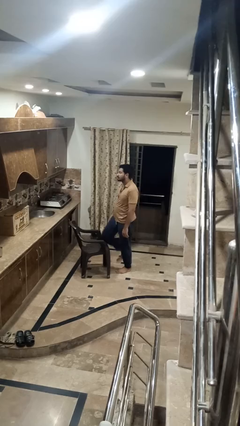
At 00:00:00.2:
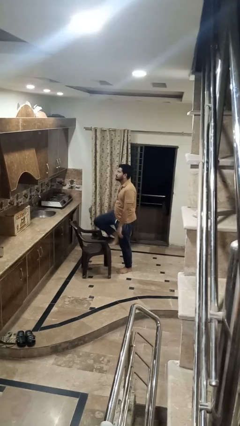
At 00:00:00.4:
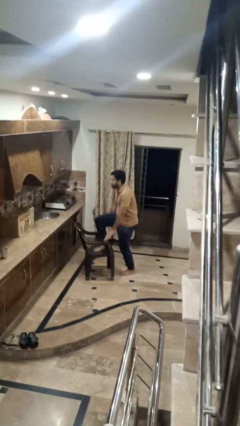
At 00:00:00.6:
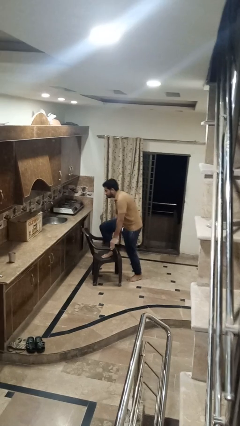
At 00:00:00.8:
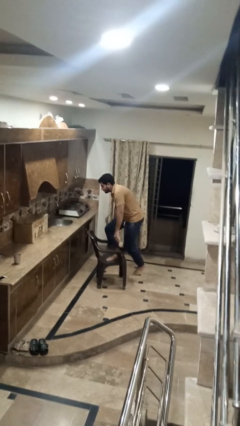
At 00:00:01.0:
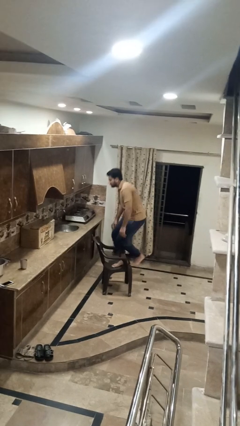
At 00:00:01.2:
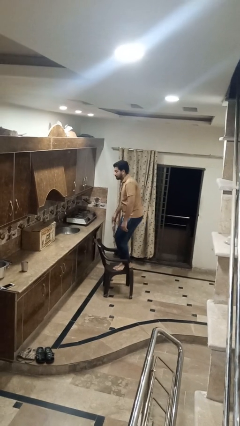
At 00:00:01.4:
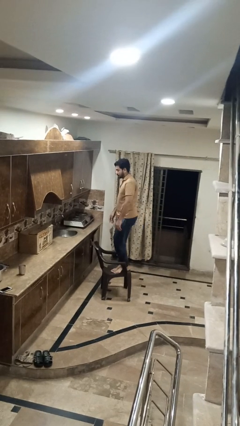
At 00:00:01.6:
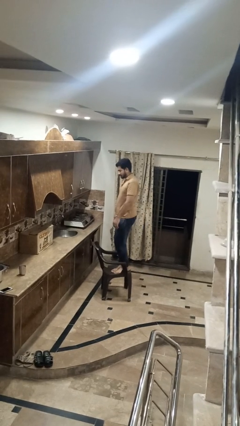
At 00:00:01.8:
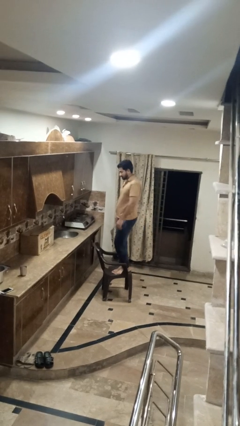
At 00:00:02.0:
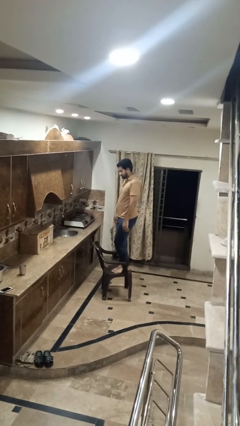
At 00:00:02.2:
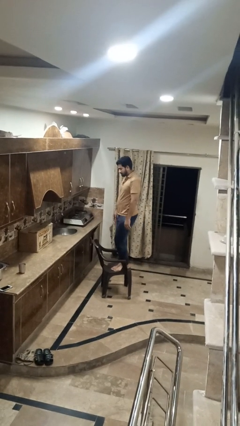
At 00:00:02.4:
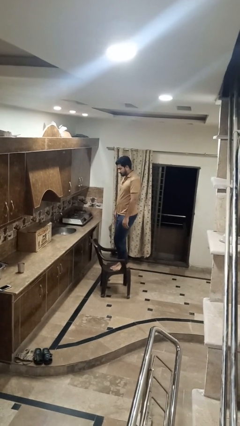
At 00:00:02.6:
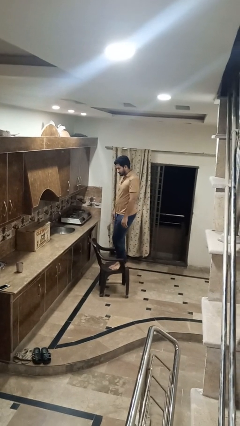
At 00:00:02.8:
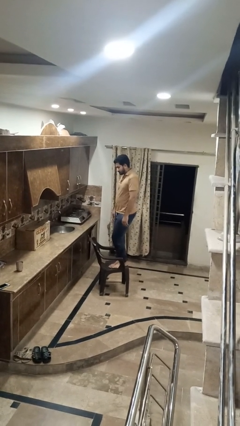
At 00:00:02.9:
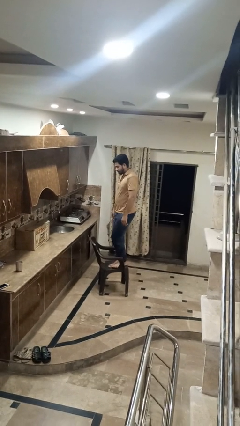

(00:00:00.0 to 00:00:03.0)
person climbs on chair

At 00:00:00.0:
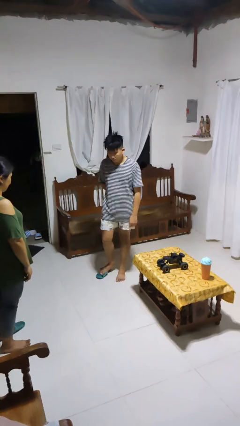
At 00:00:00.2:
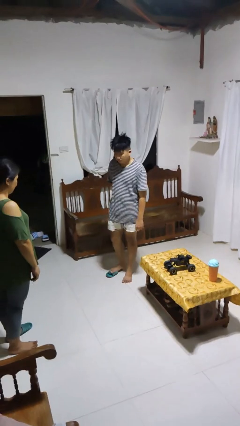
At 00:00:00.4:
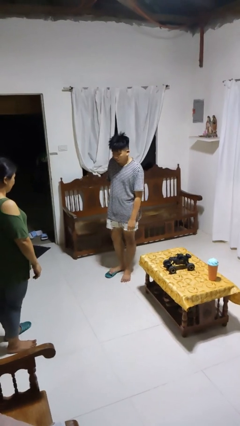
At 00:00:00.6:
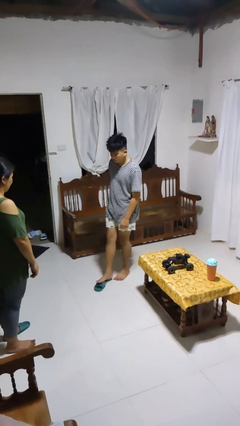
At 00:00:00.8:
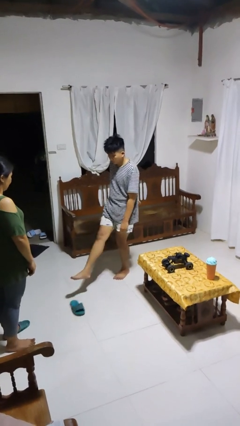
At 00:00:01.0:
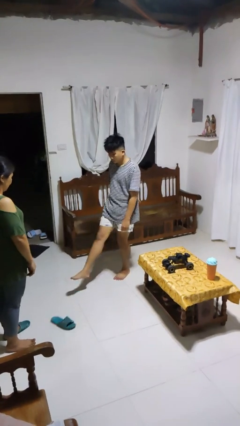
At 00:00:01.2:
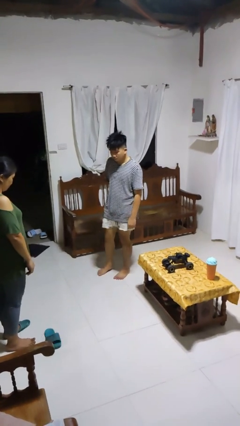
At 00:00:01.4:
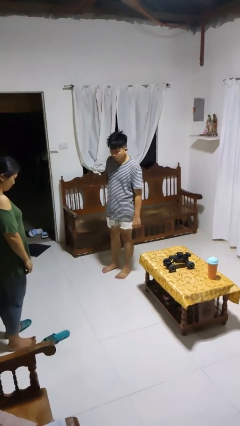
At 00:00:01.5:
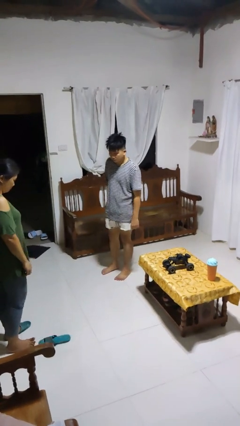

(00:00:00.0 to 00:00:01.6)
person kicks object to person

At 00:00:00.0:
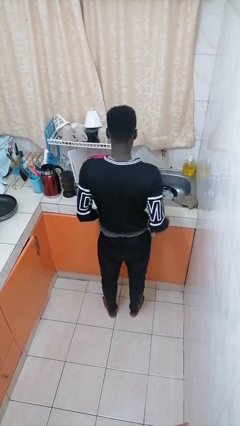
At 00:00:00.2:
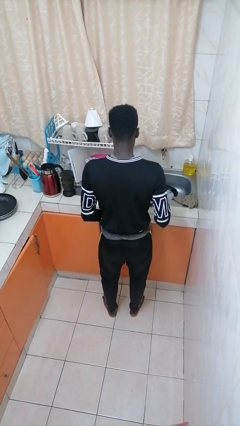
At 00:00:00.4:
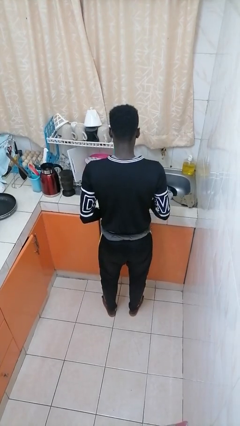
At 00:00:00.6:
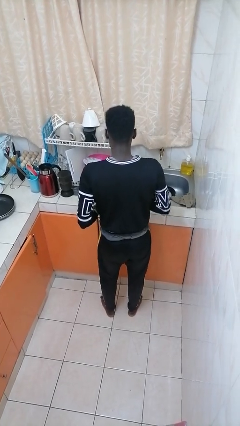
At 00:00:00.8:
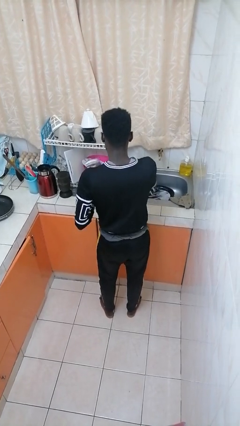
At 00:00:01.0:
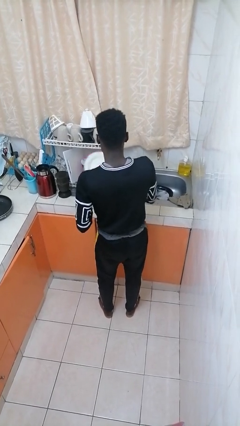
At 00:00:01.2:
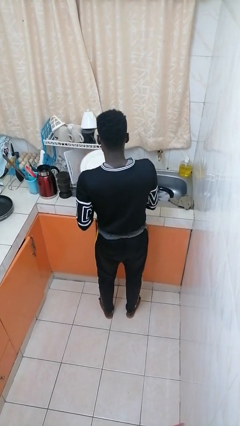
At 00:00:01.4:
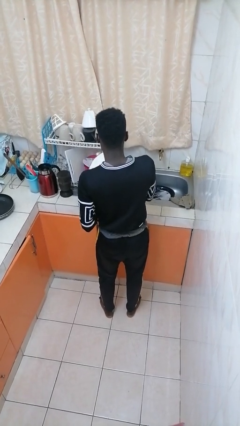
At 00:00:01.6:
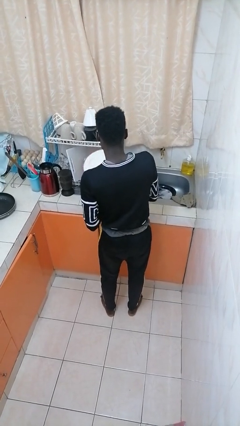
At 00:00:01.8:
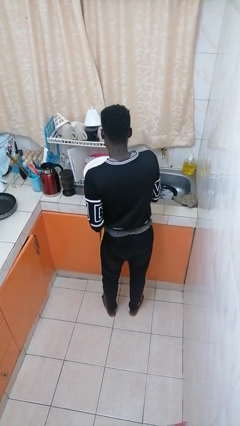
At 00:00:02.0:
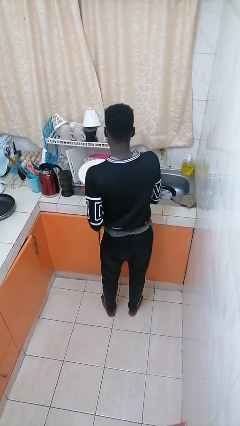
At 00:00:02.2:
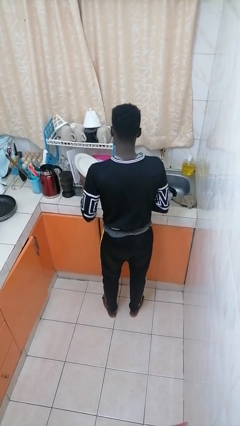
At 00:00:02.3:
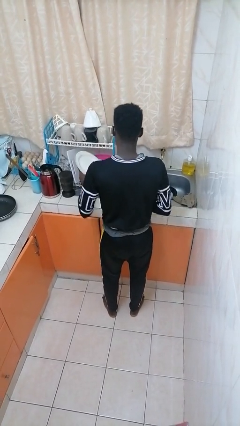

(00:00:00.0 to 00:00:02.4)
person dries dish

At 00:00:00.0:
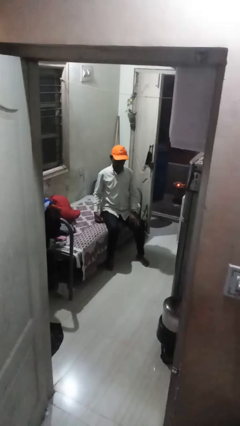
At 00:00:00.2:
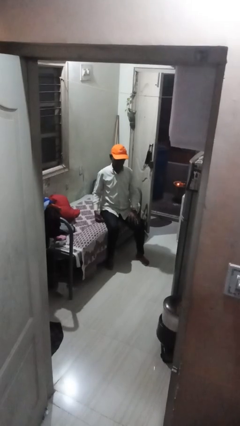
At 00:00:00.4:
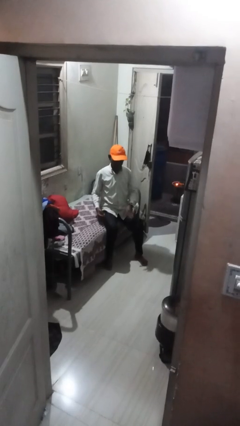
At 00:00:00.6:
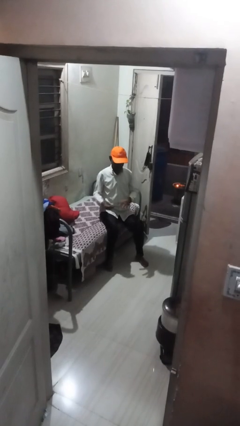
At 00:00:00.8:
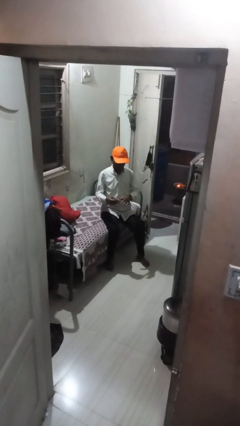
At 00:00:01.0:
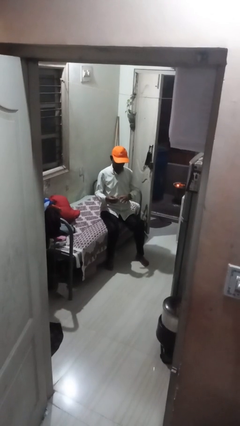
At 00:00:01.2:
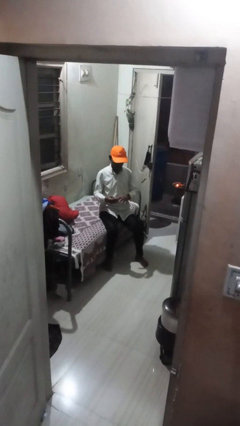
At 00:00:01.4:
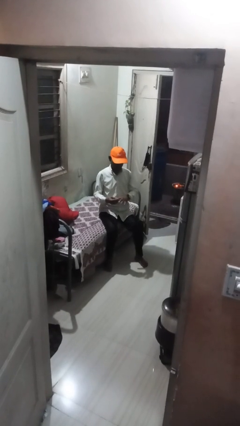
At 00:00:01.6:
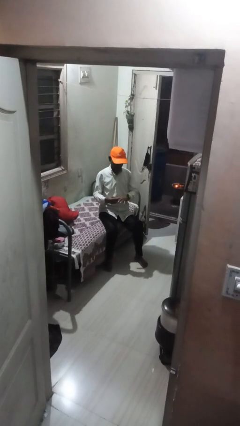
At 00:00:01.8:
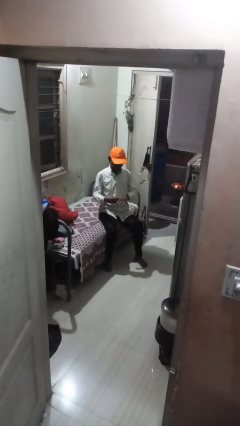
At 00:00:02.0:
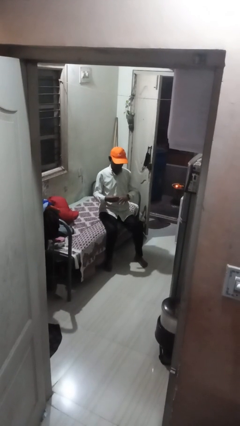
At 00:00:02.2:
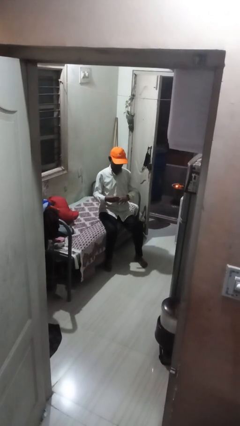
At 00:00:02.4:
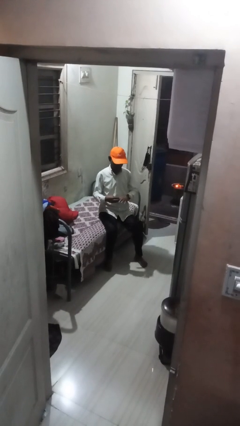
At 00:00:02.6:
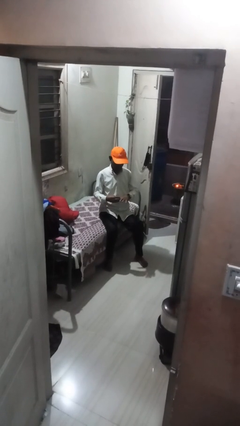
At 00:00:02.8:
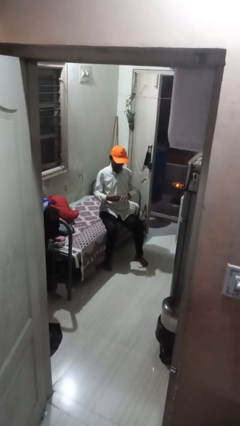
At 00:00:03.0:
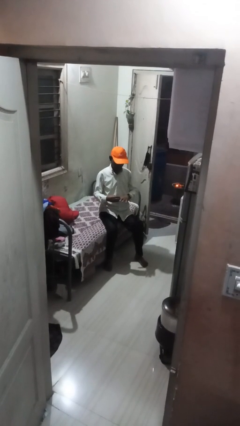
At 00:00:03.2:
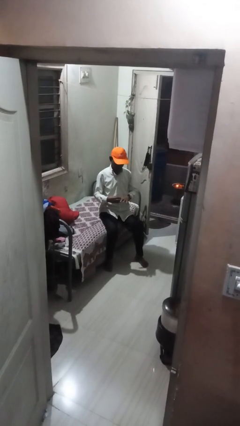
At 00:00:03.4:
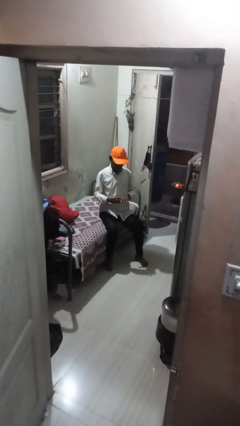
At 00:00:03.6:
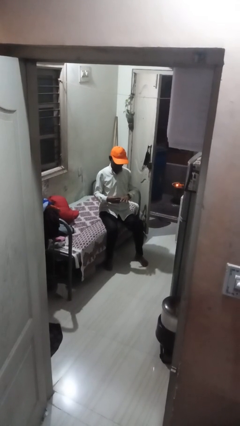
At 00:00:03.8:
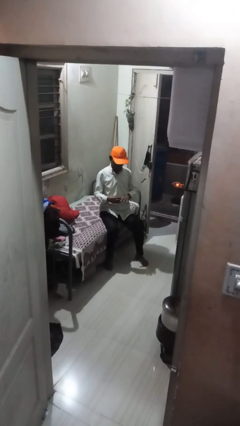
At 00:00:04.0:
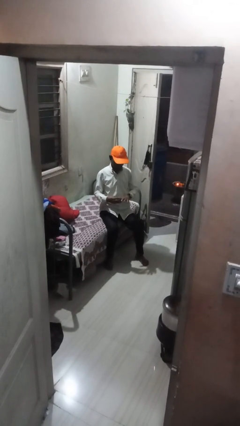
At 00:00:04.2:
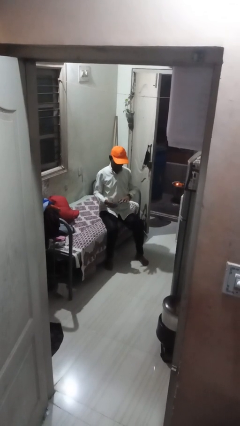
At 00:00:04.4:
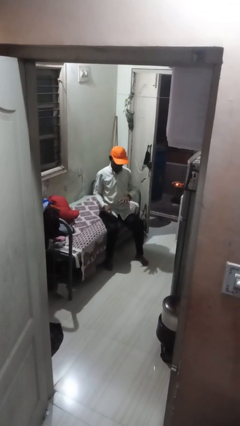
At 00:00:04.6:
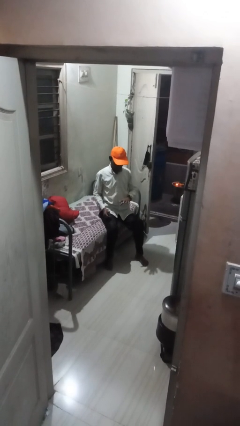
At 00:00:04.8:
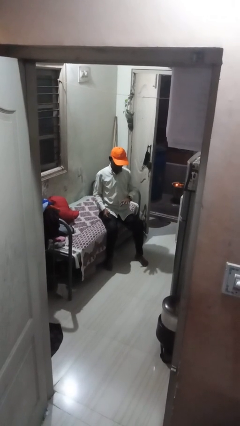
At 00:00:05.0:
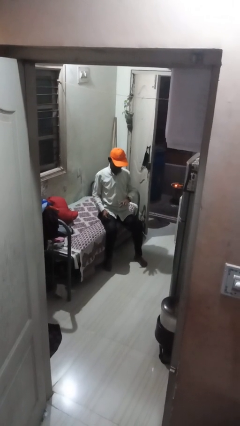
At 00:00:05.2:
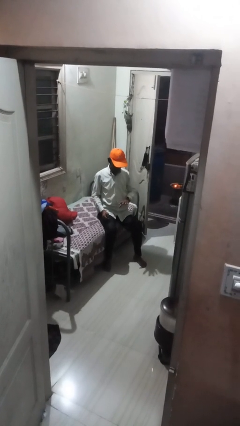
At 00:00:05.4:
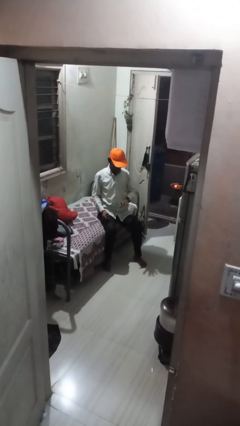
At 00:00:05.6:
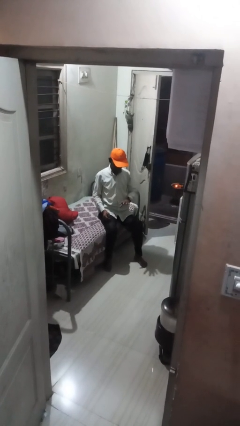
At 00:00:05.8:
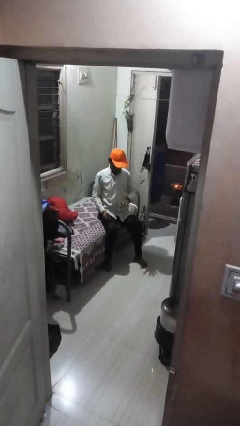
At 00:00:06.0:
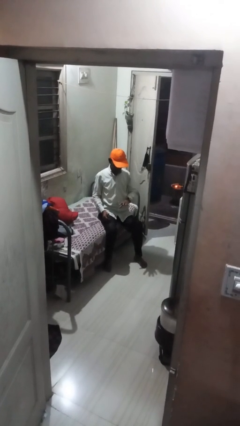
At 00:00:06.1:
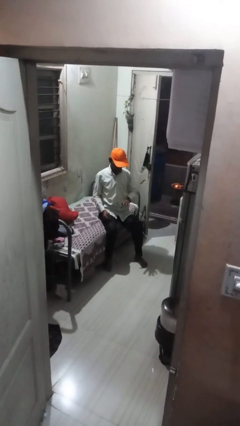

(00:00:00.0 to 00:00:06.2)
person puts on ring

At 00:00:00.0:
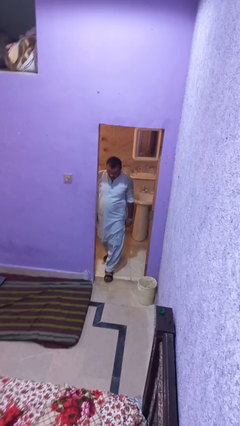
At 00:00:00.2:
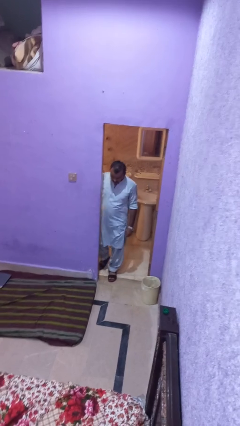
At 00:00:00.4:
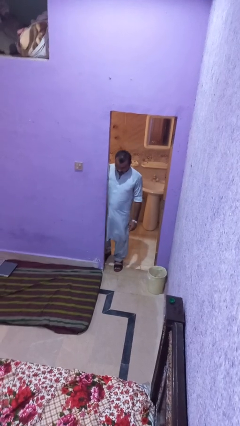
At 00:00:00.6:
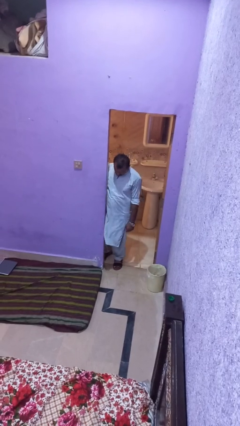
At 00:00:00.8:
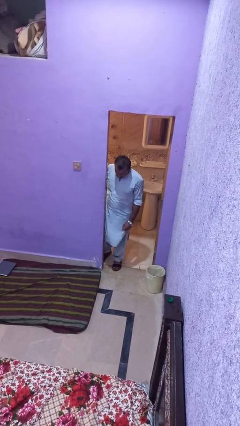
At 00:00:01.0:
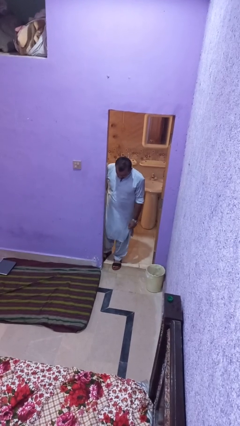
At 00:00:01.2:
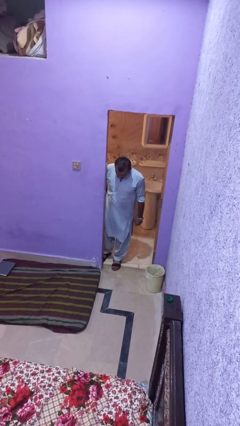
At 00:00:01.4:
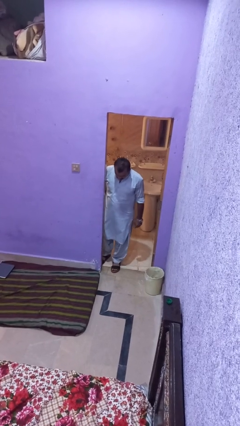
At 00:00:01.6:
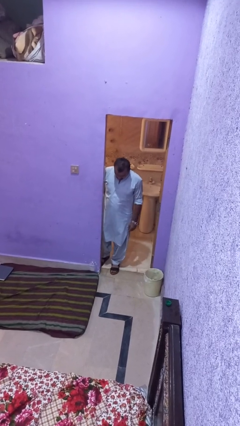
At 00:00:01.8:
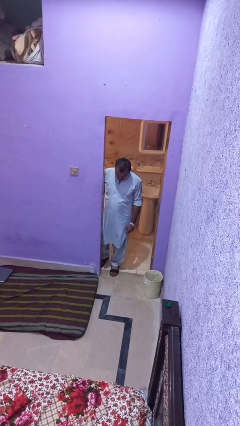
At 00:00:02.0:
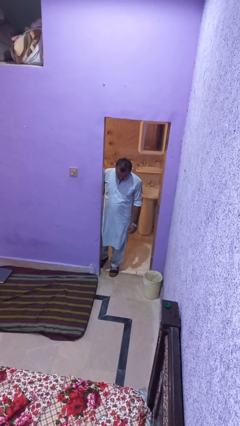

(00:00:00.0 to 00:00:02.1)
person bumps into wall

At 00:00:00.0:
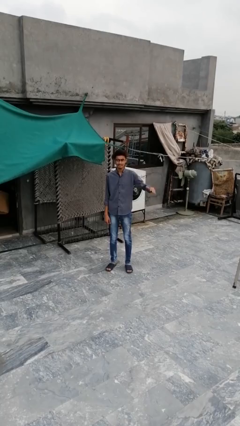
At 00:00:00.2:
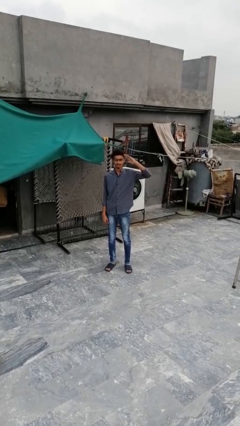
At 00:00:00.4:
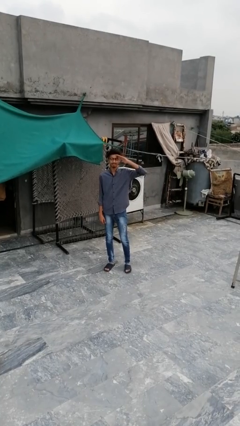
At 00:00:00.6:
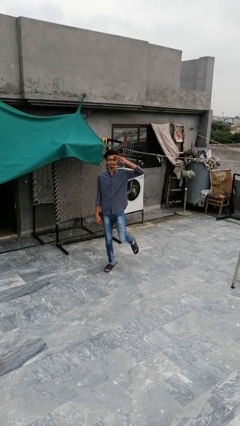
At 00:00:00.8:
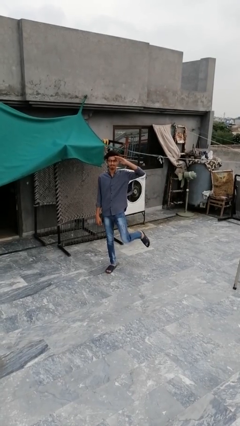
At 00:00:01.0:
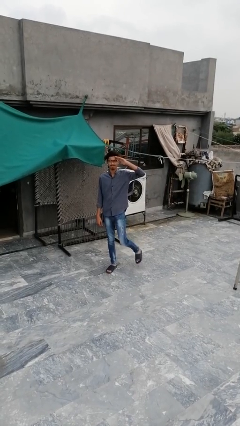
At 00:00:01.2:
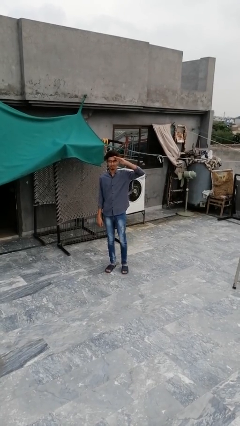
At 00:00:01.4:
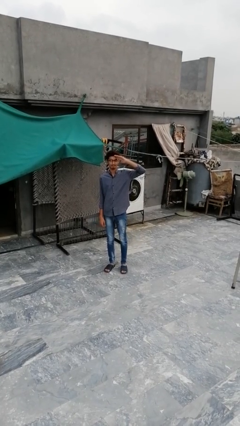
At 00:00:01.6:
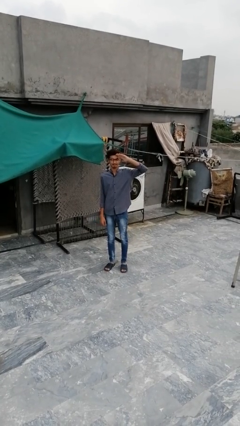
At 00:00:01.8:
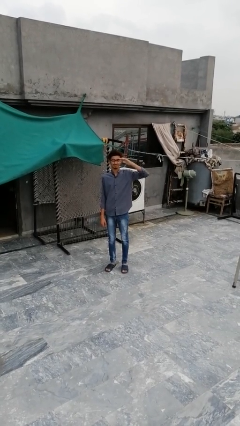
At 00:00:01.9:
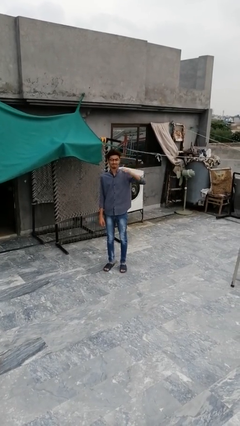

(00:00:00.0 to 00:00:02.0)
person salutes
